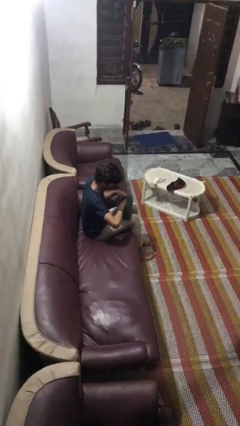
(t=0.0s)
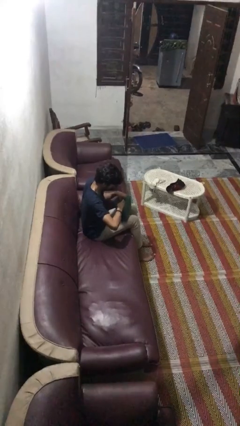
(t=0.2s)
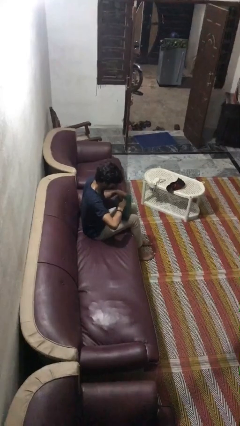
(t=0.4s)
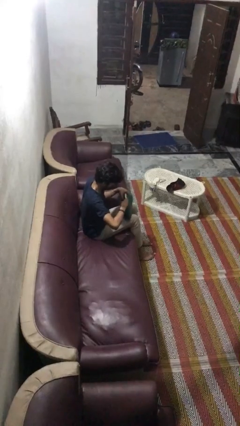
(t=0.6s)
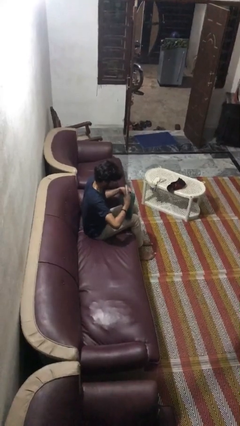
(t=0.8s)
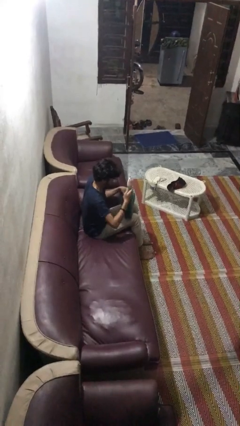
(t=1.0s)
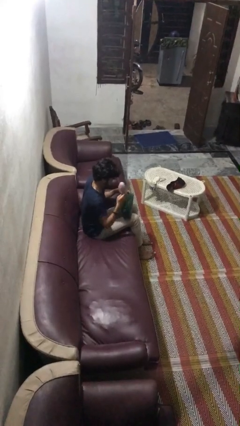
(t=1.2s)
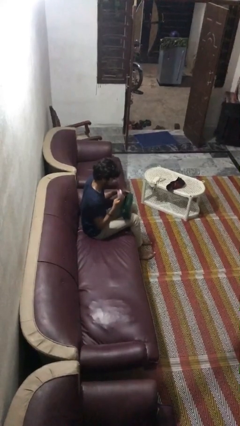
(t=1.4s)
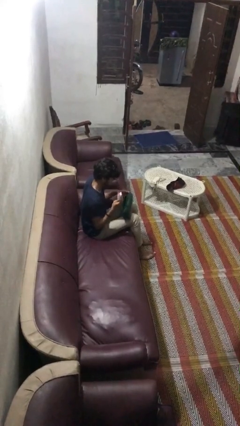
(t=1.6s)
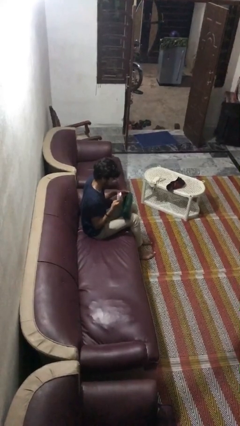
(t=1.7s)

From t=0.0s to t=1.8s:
person takes object from purse

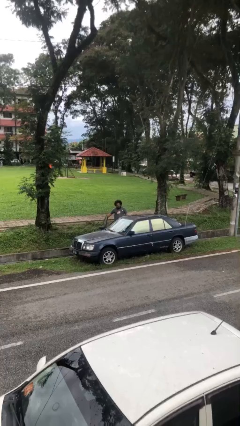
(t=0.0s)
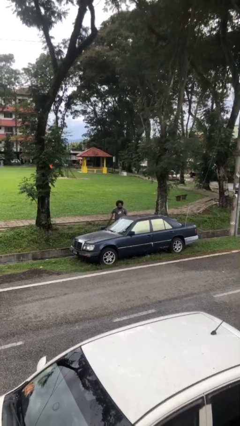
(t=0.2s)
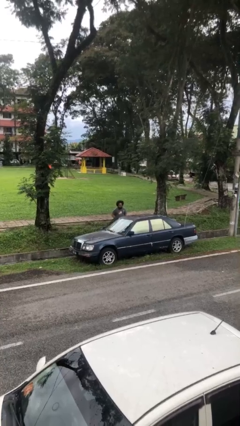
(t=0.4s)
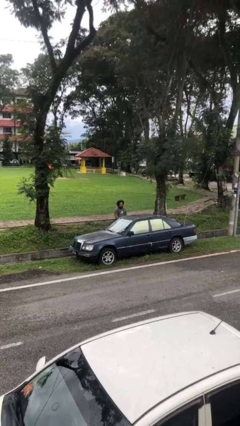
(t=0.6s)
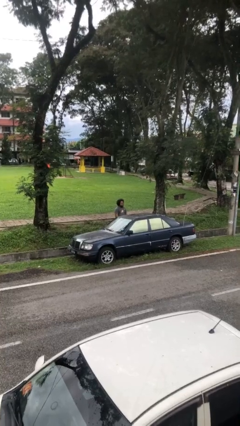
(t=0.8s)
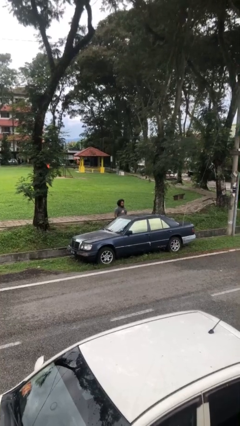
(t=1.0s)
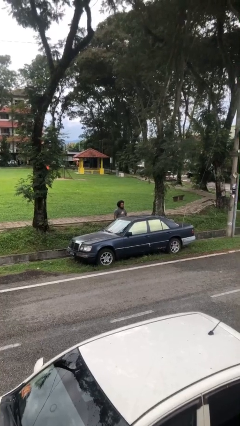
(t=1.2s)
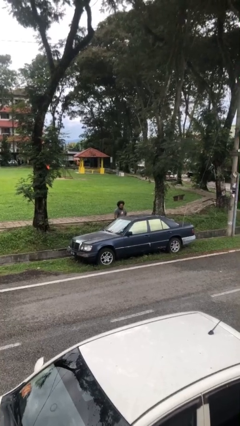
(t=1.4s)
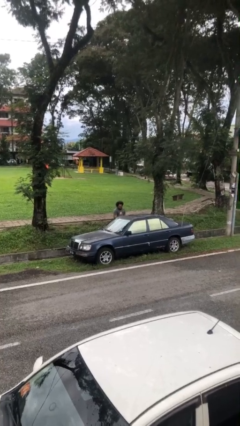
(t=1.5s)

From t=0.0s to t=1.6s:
person closes car door

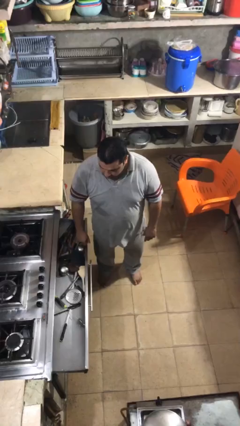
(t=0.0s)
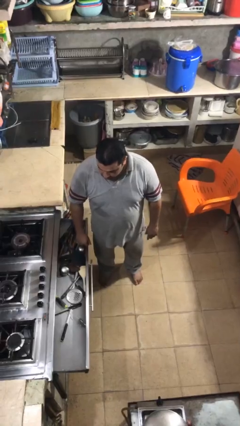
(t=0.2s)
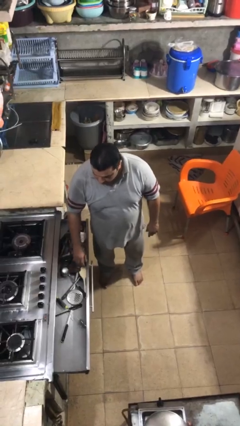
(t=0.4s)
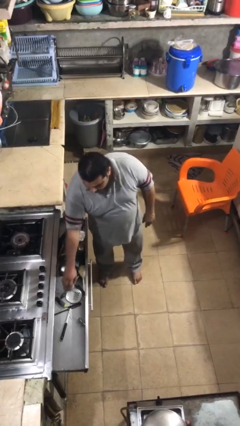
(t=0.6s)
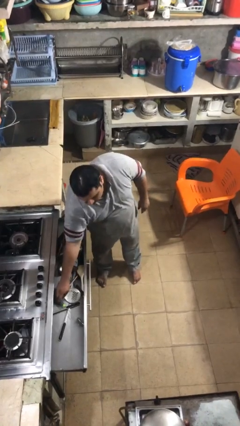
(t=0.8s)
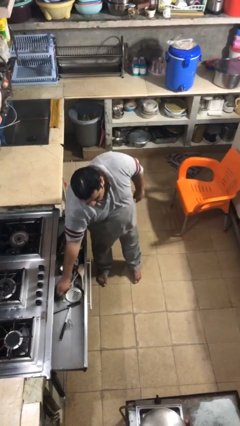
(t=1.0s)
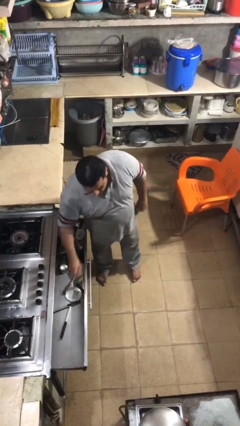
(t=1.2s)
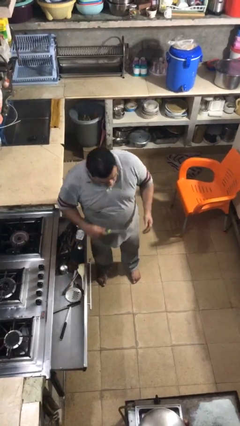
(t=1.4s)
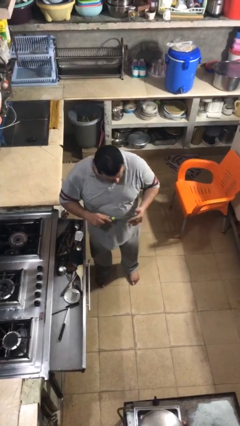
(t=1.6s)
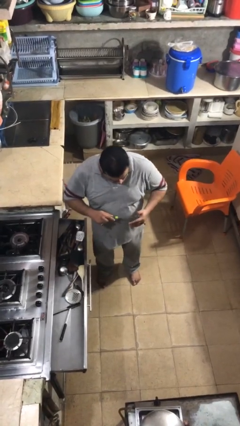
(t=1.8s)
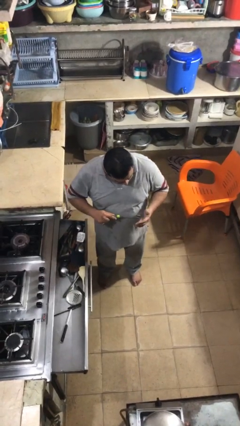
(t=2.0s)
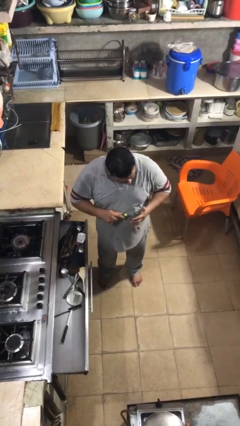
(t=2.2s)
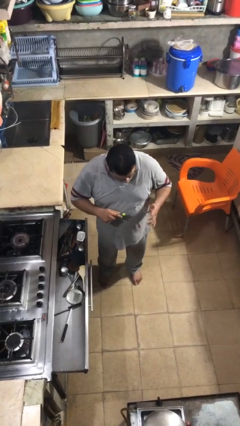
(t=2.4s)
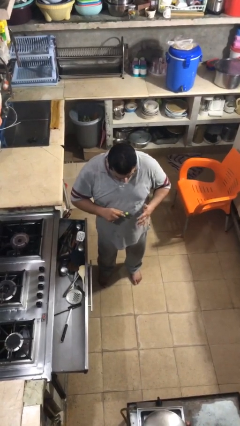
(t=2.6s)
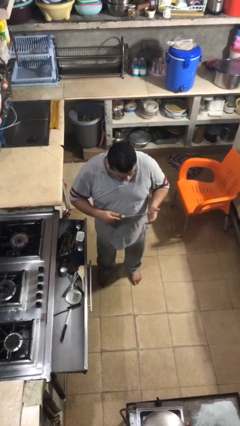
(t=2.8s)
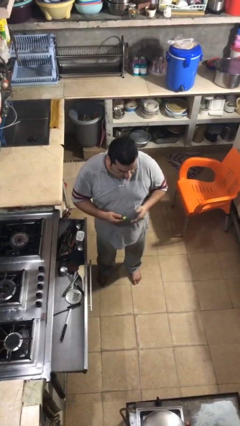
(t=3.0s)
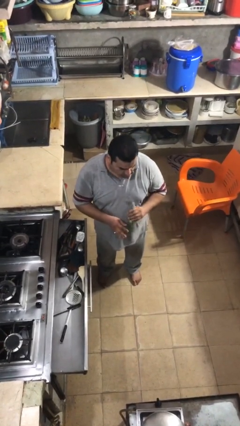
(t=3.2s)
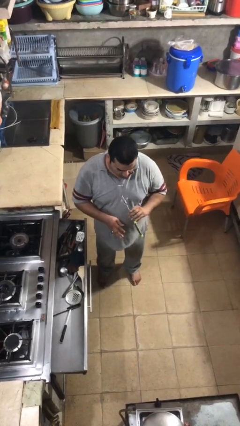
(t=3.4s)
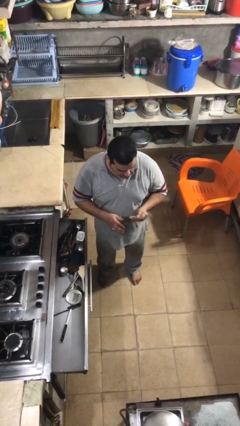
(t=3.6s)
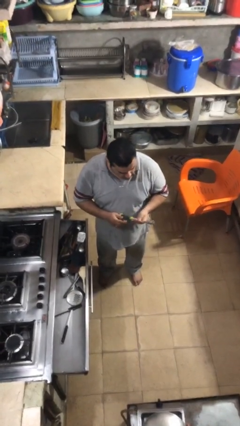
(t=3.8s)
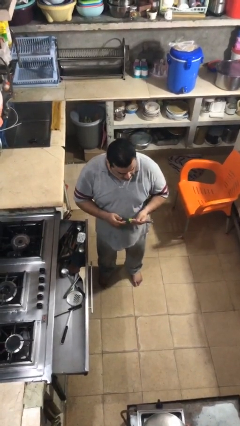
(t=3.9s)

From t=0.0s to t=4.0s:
person takes object from kitchen drawer

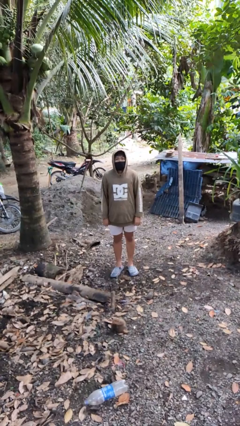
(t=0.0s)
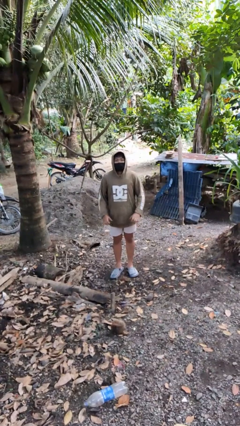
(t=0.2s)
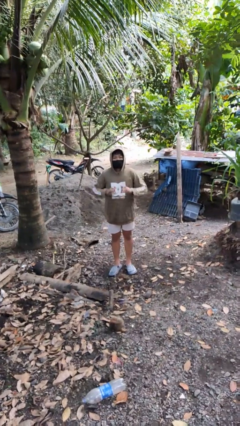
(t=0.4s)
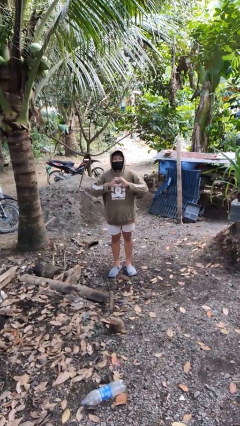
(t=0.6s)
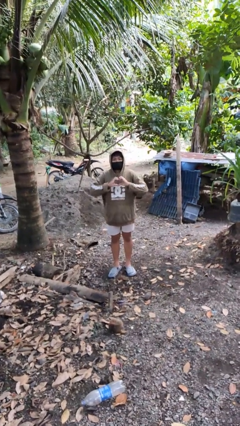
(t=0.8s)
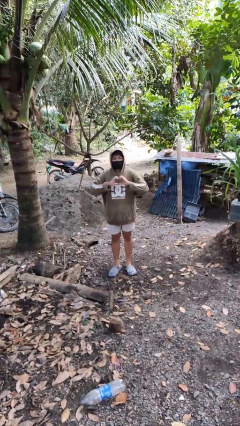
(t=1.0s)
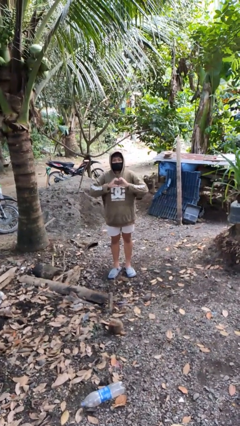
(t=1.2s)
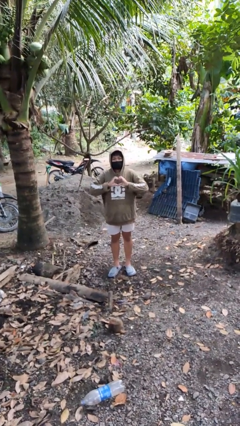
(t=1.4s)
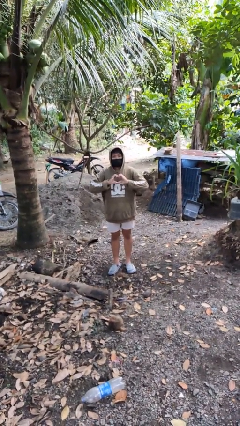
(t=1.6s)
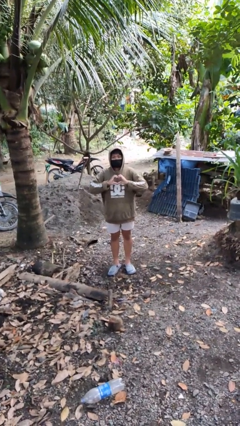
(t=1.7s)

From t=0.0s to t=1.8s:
person gestures heart

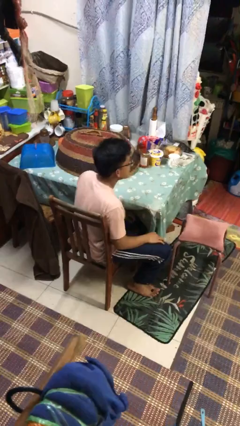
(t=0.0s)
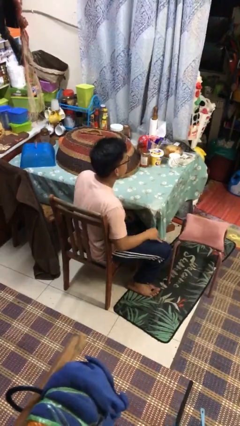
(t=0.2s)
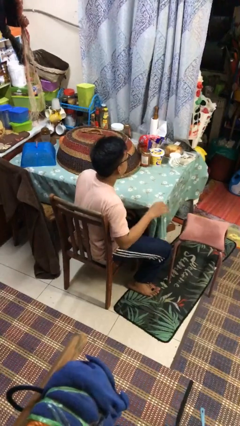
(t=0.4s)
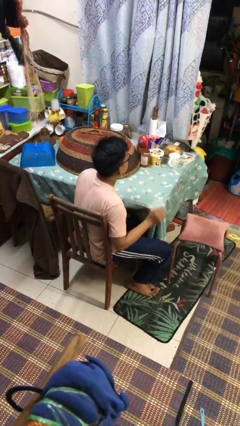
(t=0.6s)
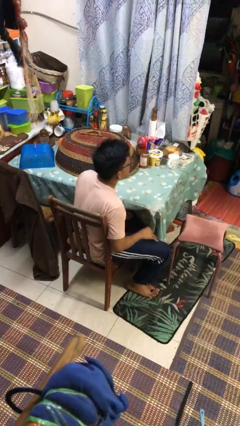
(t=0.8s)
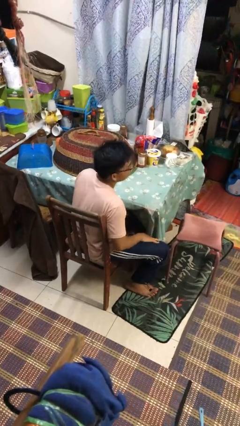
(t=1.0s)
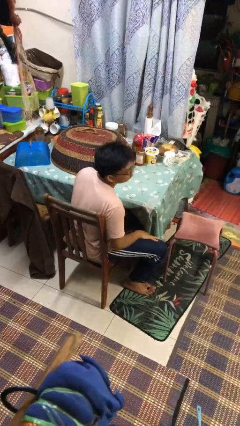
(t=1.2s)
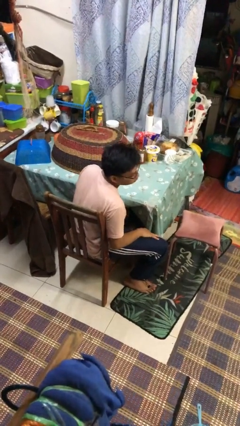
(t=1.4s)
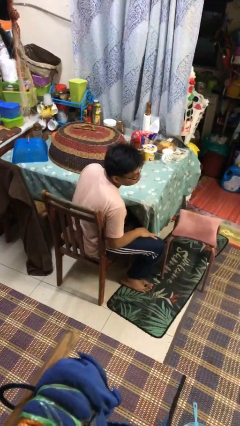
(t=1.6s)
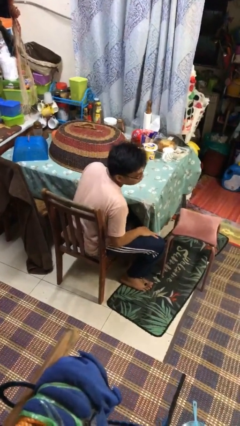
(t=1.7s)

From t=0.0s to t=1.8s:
person slaps hands on thighs

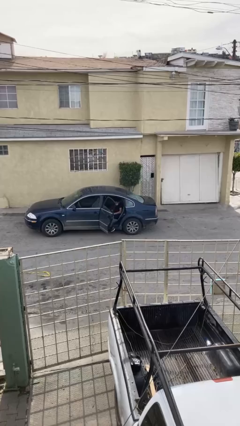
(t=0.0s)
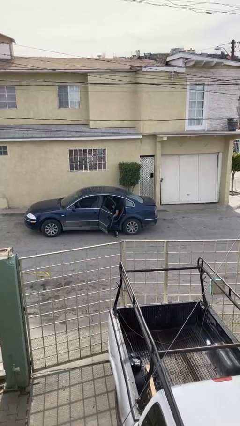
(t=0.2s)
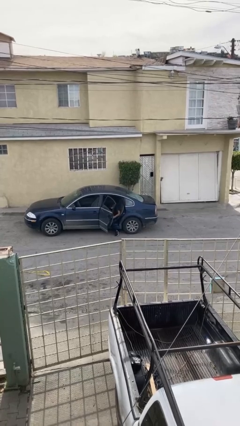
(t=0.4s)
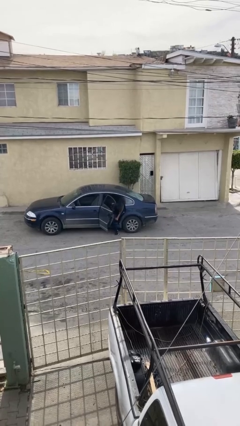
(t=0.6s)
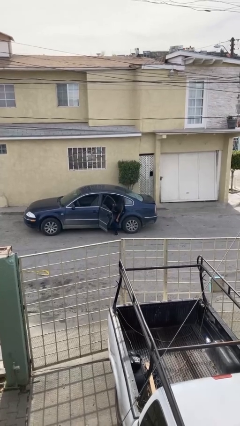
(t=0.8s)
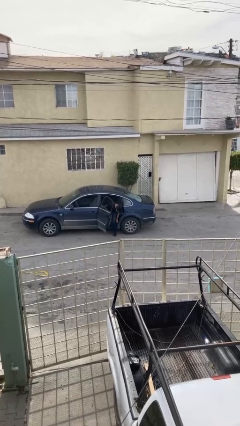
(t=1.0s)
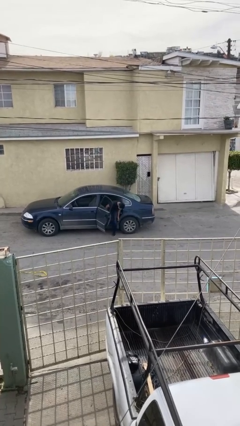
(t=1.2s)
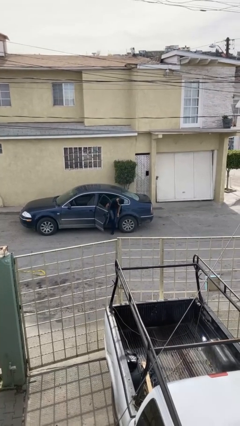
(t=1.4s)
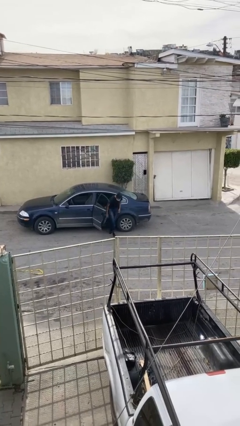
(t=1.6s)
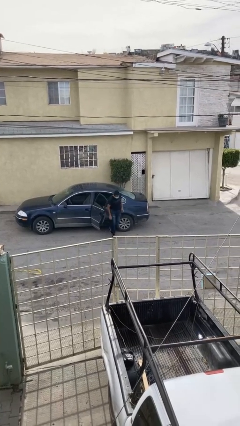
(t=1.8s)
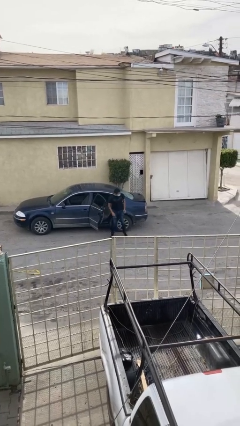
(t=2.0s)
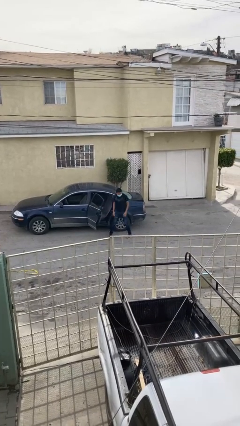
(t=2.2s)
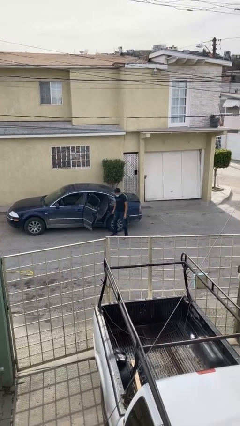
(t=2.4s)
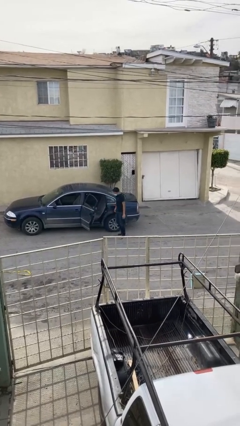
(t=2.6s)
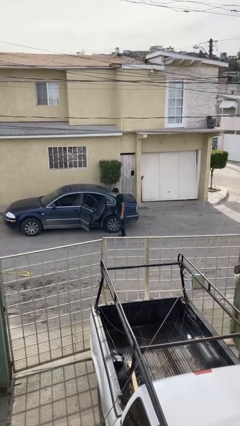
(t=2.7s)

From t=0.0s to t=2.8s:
person exits car

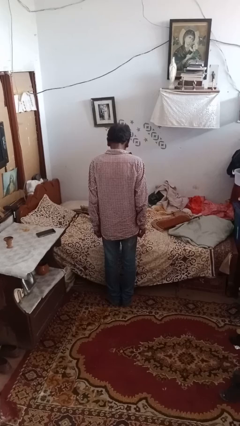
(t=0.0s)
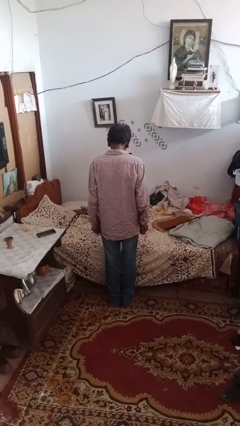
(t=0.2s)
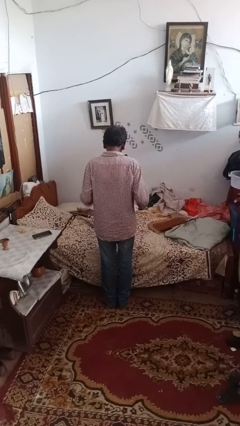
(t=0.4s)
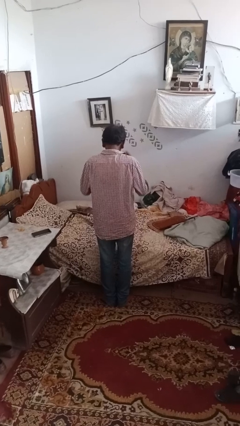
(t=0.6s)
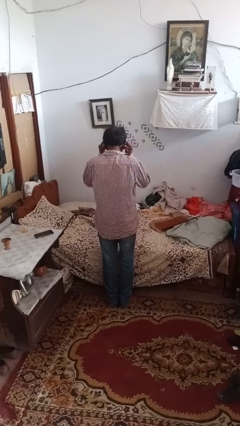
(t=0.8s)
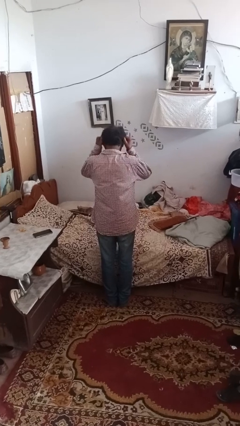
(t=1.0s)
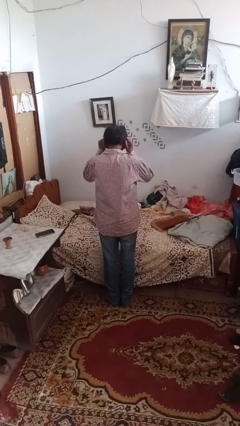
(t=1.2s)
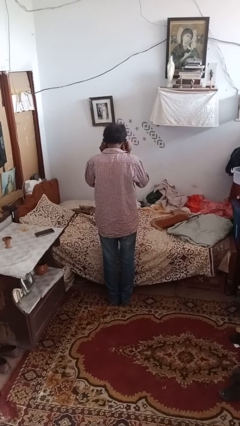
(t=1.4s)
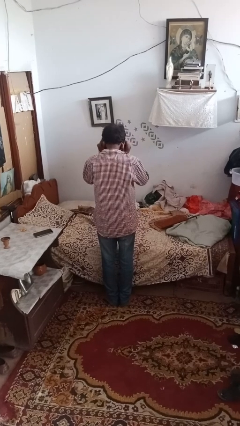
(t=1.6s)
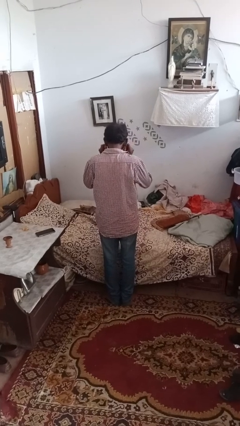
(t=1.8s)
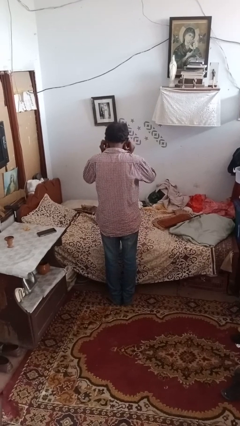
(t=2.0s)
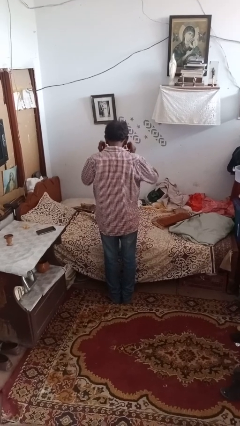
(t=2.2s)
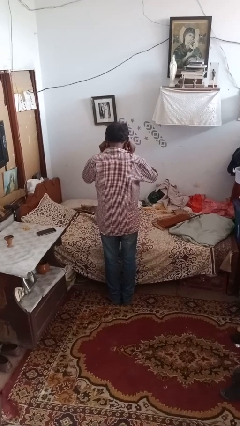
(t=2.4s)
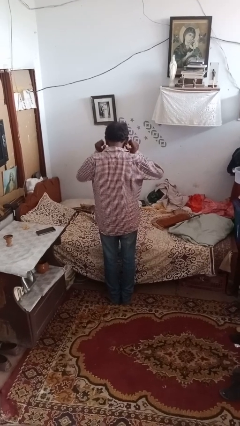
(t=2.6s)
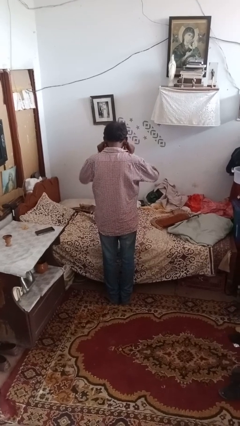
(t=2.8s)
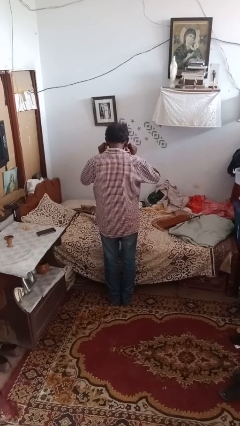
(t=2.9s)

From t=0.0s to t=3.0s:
person touches earlobe
